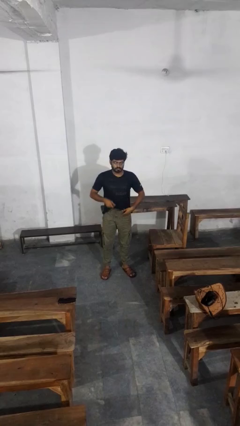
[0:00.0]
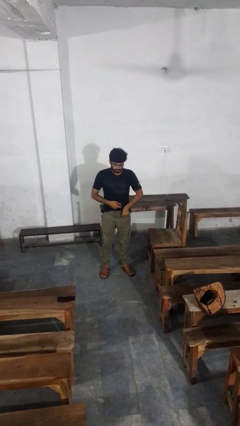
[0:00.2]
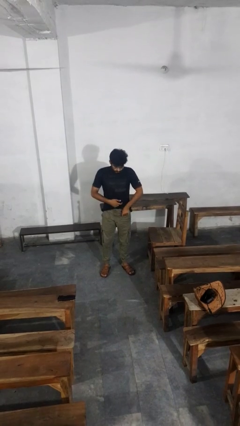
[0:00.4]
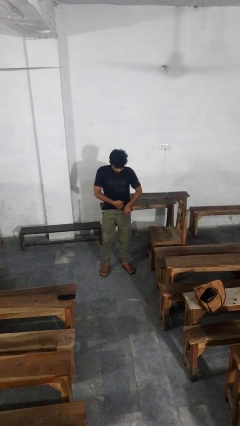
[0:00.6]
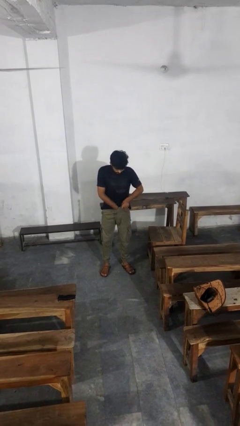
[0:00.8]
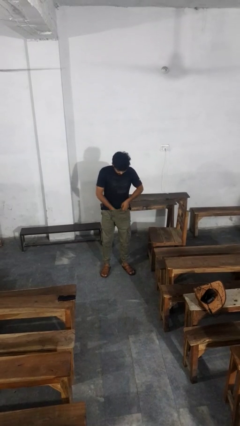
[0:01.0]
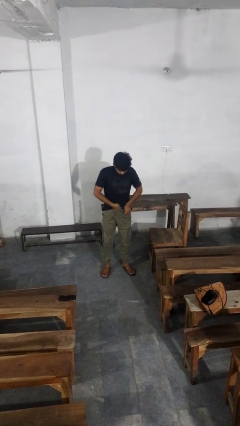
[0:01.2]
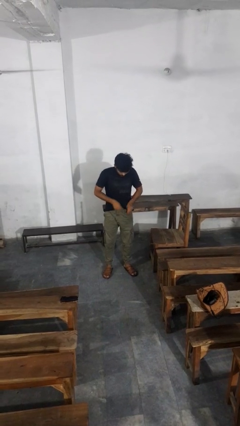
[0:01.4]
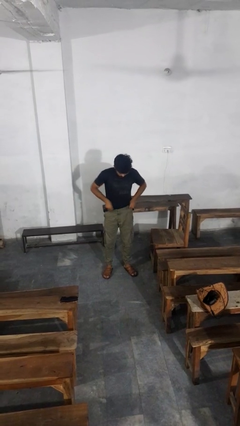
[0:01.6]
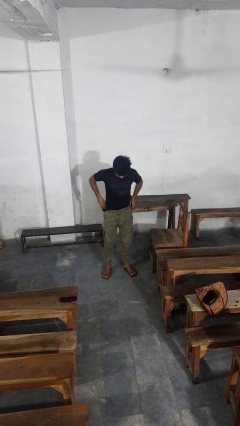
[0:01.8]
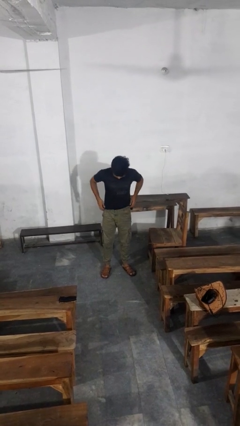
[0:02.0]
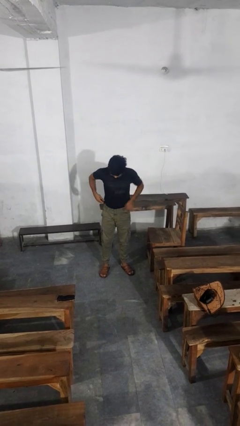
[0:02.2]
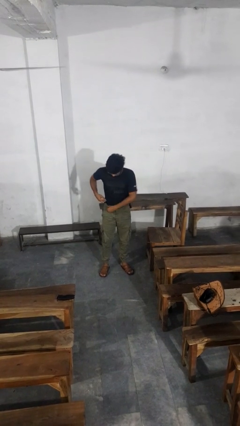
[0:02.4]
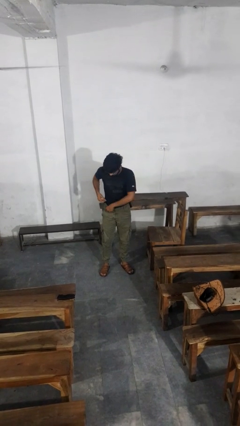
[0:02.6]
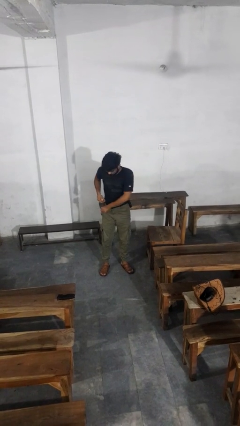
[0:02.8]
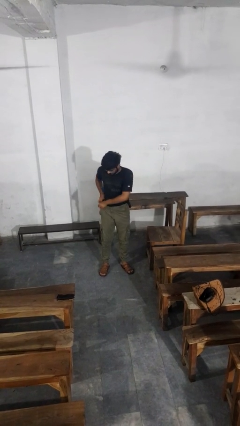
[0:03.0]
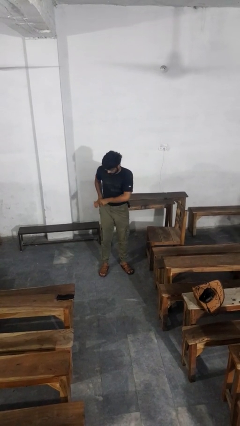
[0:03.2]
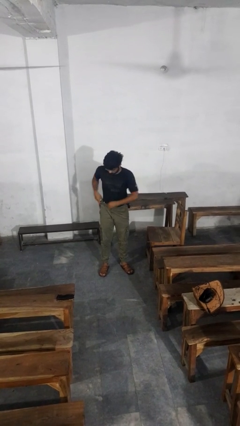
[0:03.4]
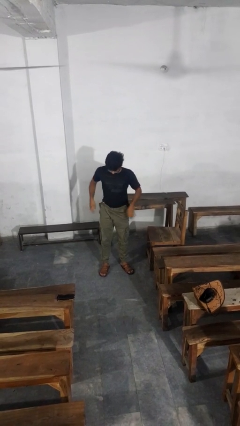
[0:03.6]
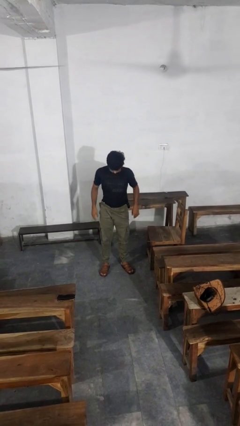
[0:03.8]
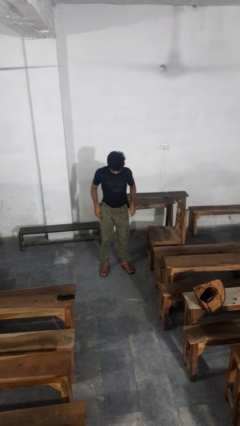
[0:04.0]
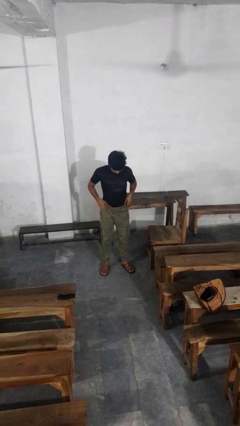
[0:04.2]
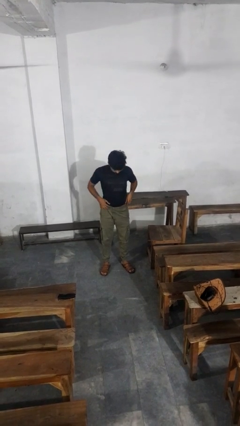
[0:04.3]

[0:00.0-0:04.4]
person tucks in shirt

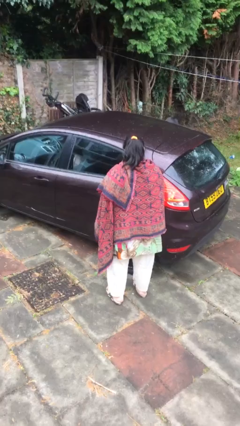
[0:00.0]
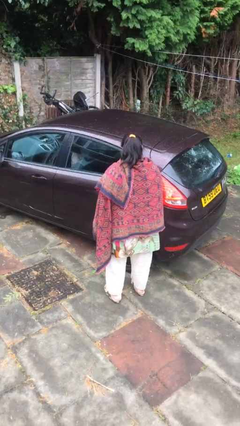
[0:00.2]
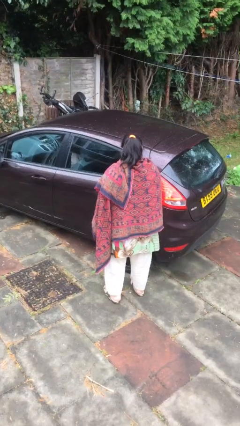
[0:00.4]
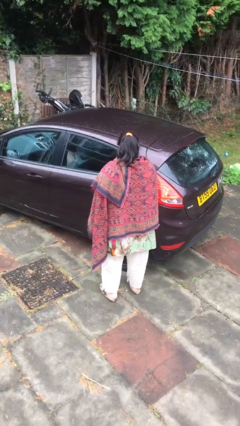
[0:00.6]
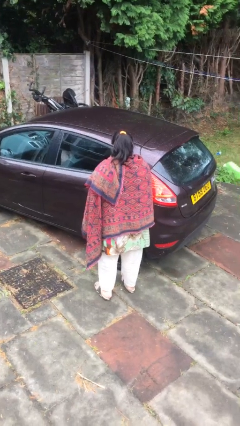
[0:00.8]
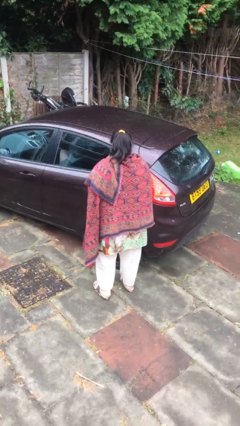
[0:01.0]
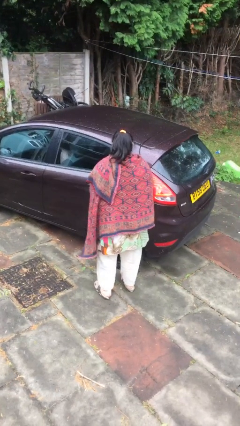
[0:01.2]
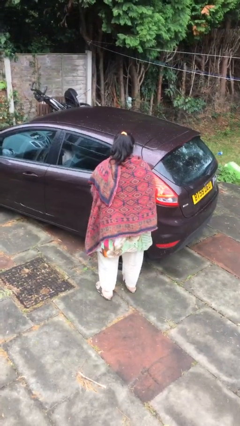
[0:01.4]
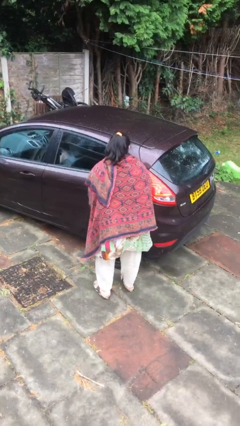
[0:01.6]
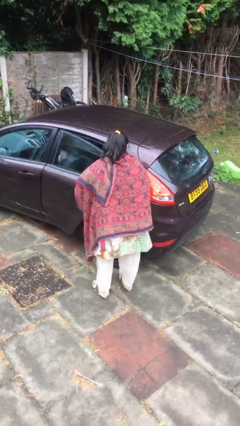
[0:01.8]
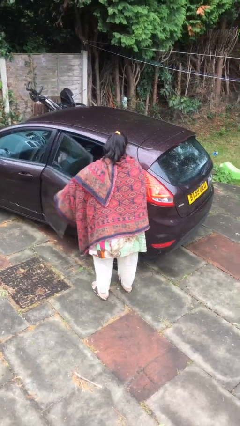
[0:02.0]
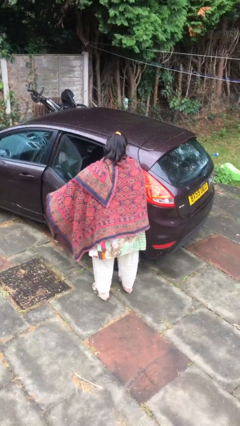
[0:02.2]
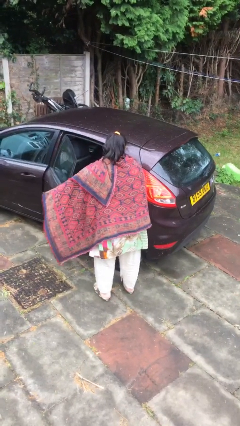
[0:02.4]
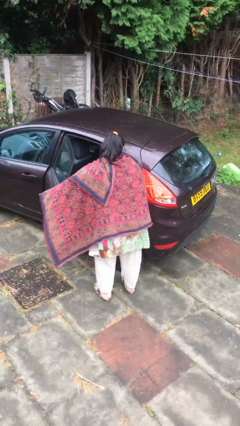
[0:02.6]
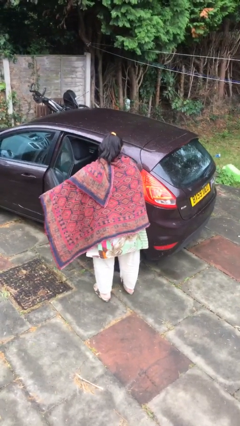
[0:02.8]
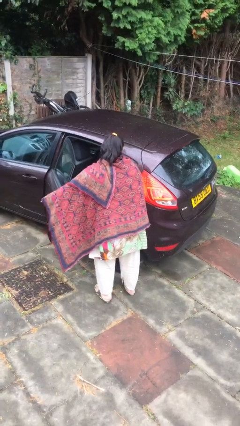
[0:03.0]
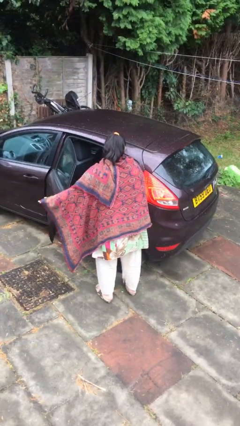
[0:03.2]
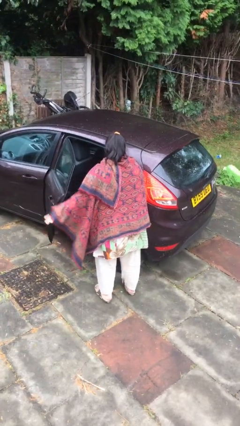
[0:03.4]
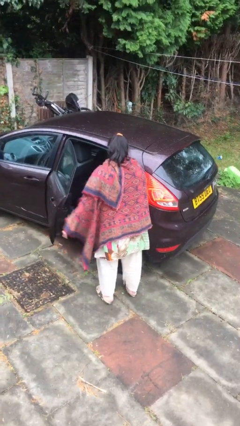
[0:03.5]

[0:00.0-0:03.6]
person opens car door

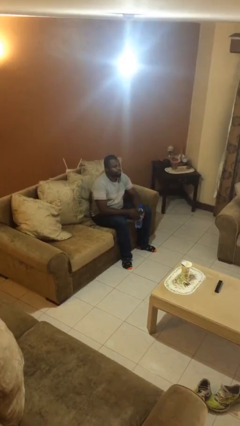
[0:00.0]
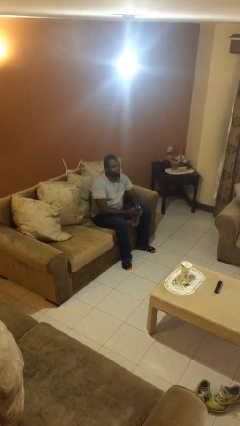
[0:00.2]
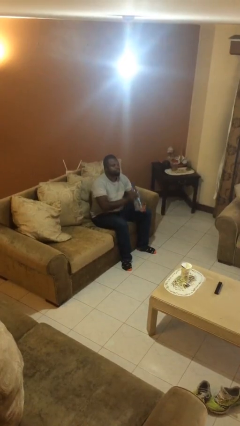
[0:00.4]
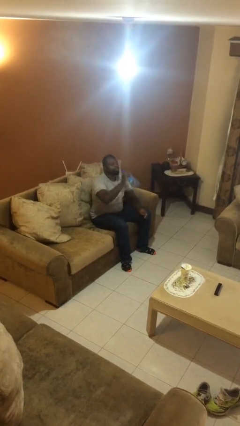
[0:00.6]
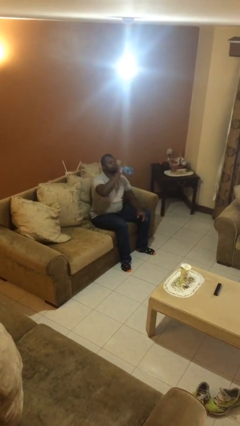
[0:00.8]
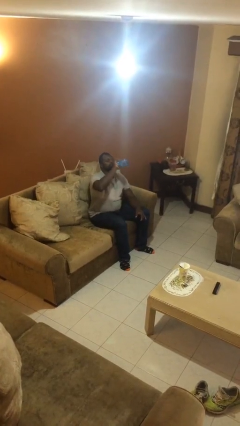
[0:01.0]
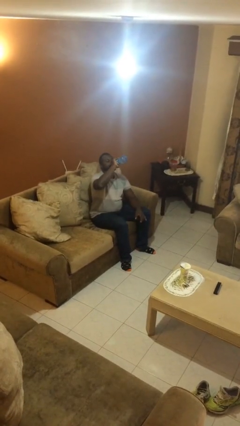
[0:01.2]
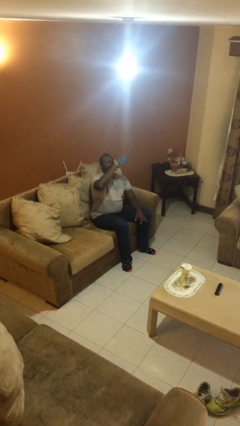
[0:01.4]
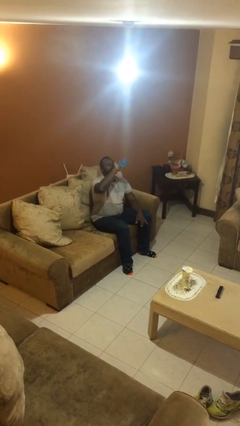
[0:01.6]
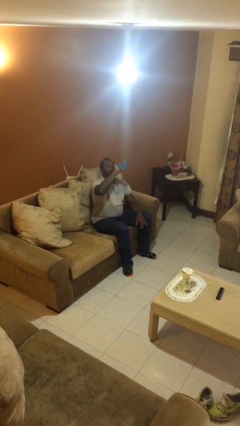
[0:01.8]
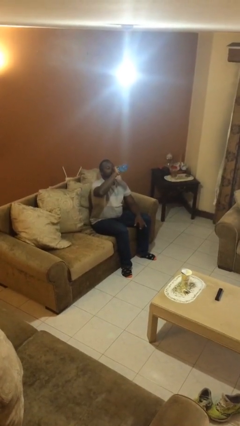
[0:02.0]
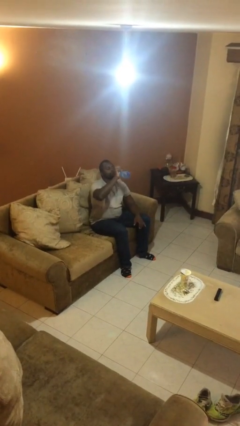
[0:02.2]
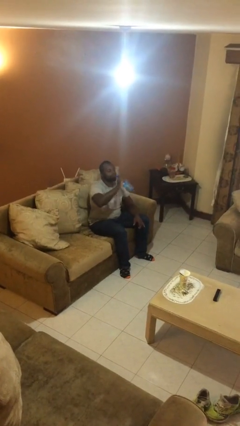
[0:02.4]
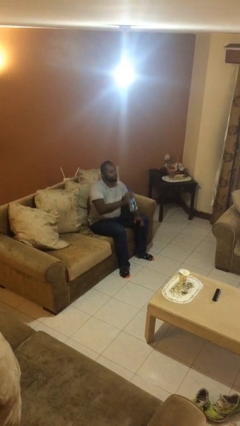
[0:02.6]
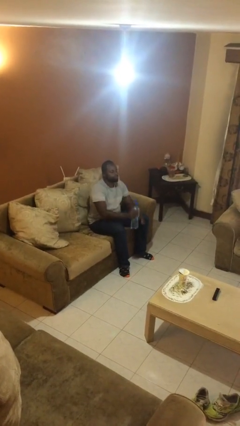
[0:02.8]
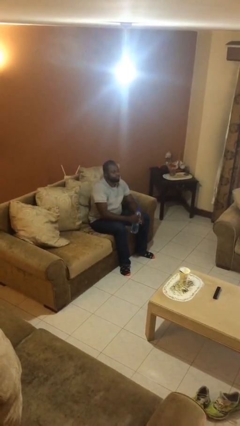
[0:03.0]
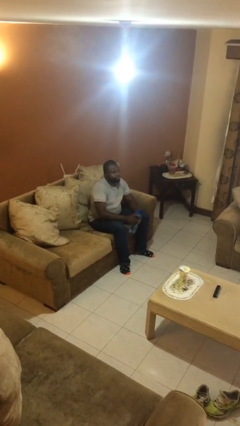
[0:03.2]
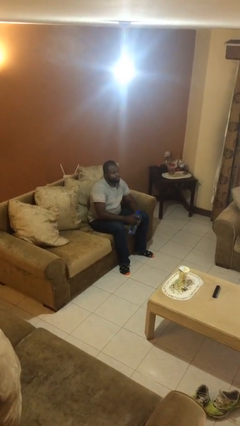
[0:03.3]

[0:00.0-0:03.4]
person drinks from bottle

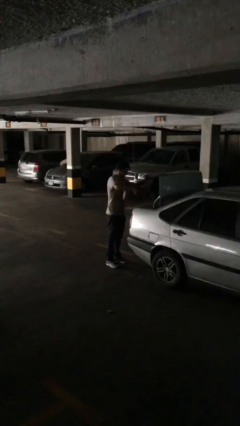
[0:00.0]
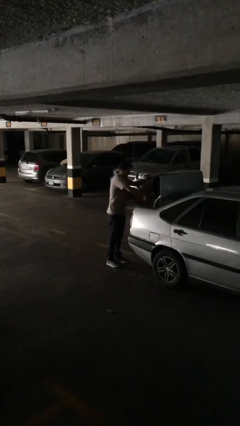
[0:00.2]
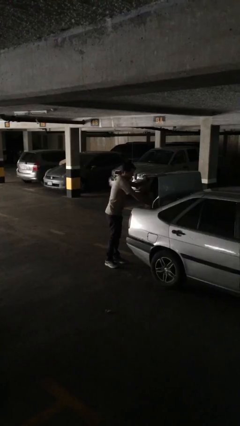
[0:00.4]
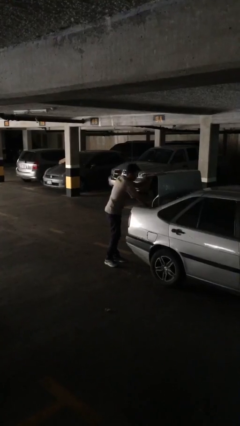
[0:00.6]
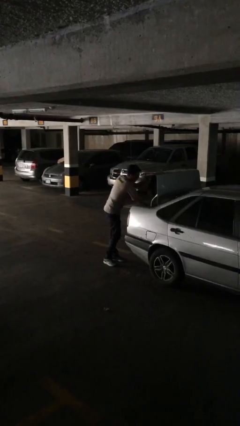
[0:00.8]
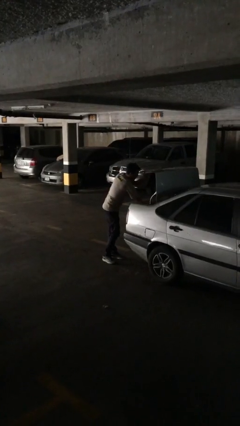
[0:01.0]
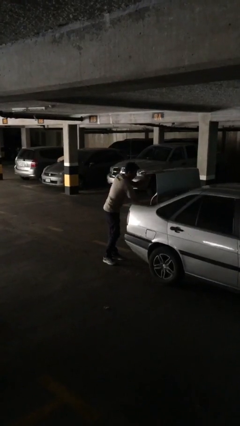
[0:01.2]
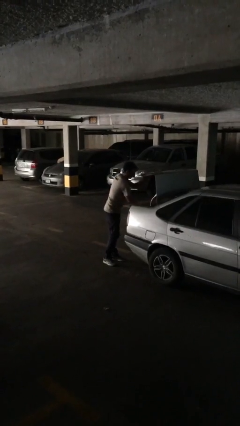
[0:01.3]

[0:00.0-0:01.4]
person loads car

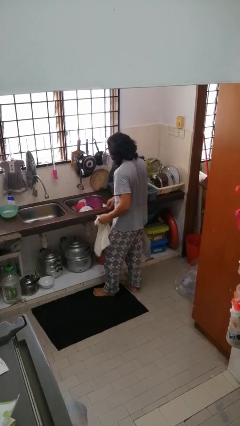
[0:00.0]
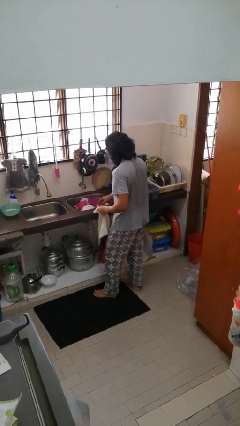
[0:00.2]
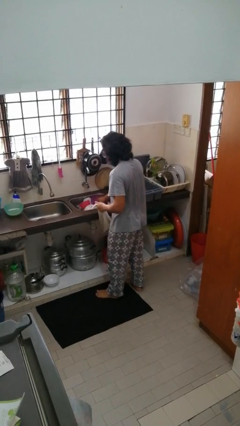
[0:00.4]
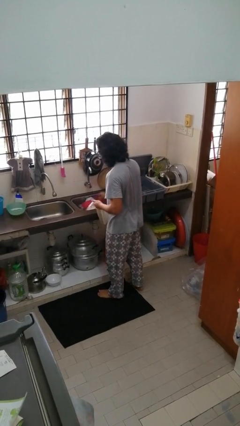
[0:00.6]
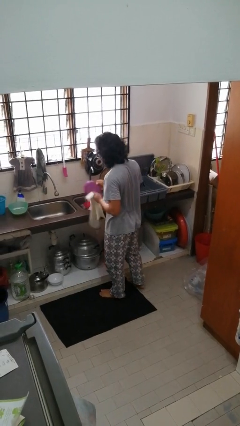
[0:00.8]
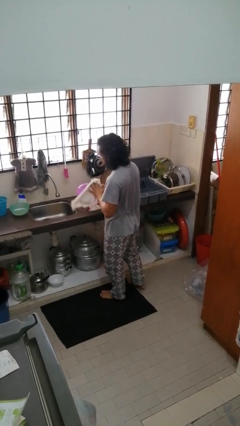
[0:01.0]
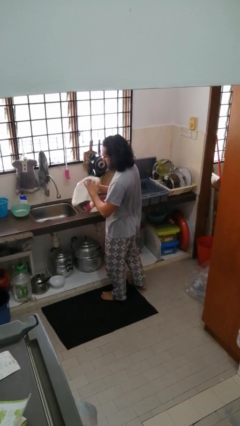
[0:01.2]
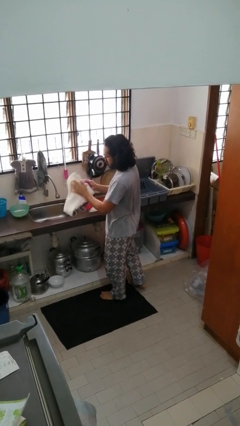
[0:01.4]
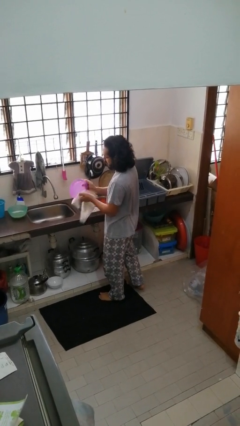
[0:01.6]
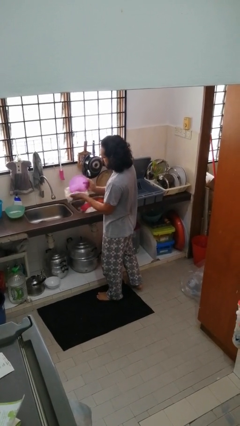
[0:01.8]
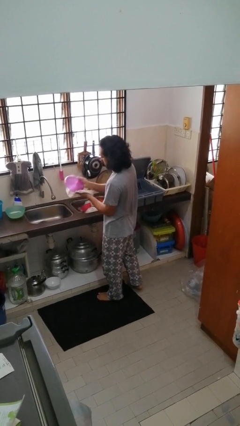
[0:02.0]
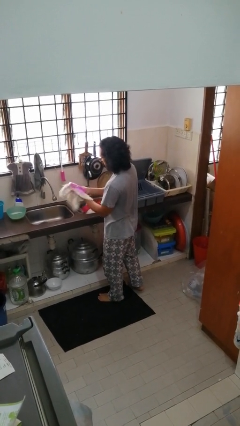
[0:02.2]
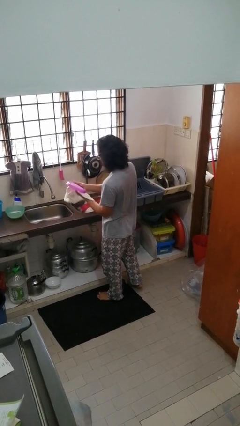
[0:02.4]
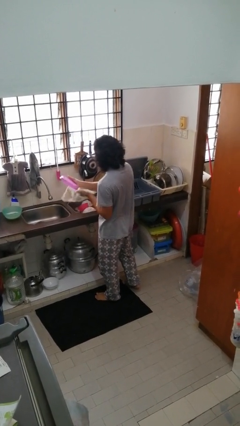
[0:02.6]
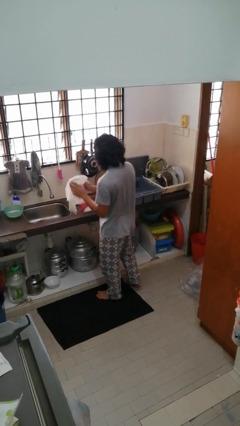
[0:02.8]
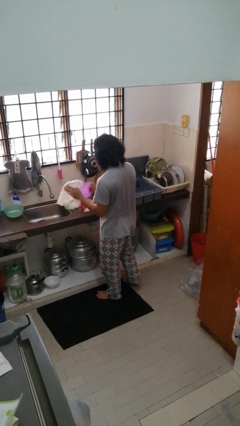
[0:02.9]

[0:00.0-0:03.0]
person dries dish

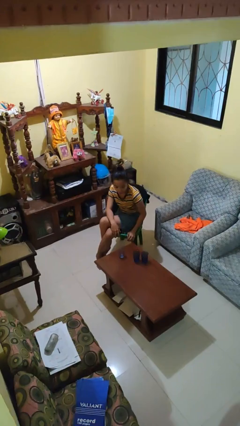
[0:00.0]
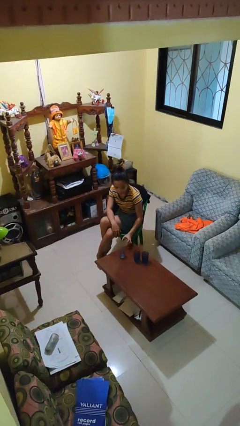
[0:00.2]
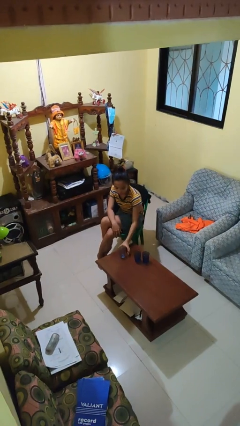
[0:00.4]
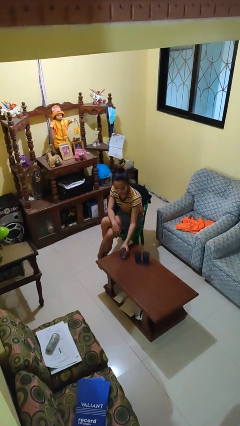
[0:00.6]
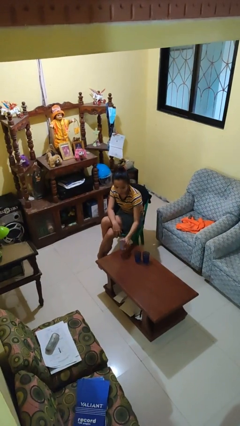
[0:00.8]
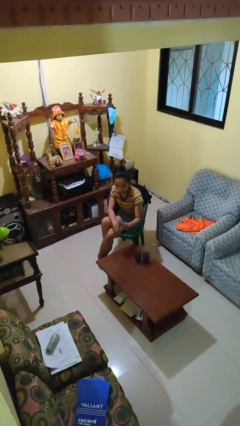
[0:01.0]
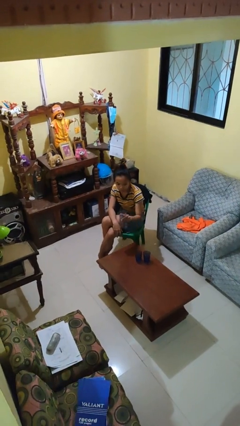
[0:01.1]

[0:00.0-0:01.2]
person picks up object from table

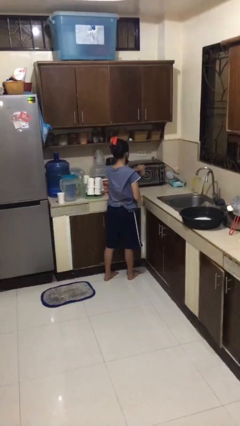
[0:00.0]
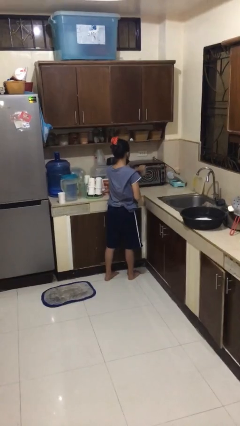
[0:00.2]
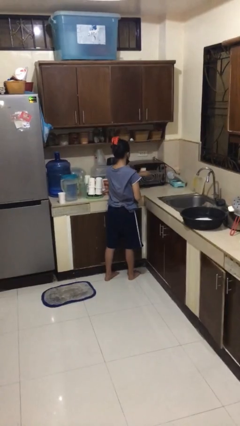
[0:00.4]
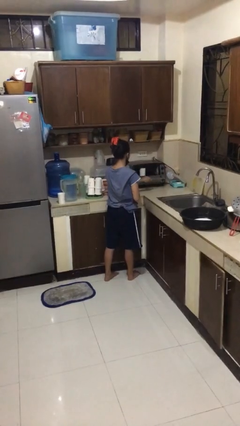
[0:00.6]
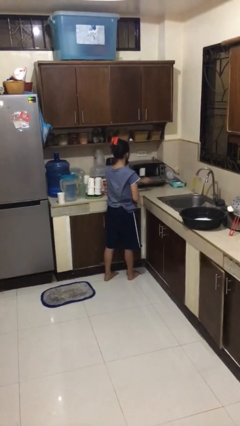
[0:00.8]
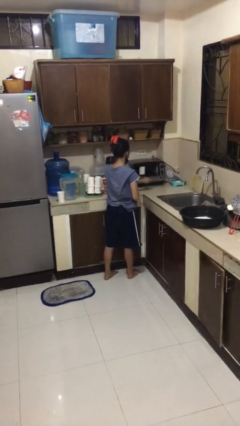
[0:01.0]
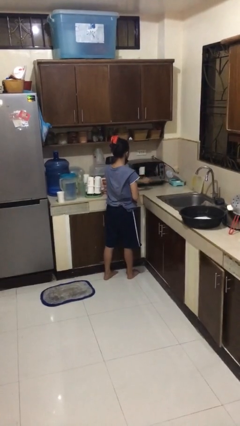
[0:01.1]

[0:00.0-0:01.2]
person opens microwave
